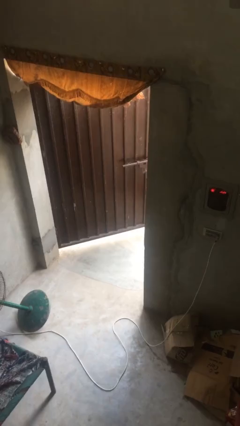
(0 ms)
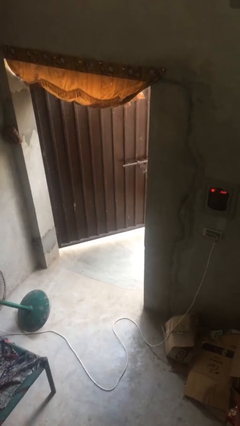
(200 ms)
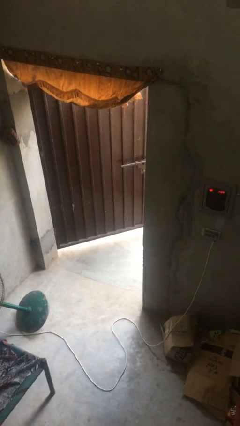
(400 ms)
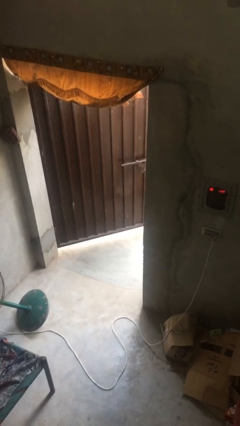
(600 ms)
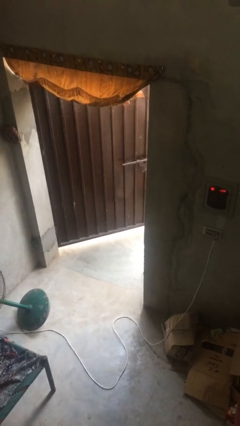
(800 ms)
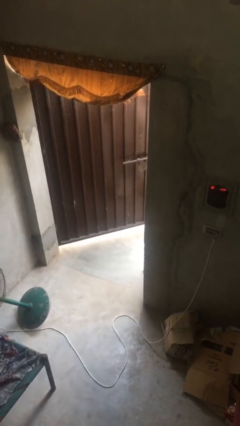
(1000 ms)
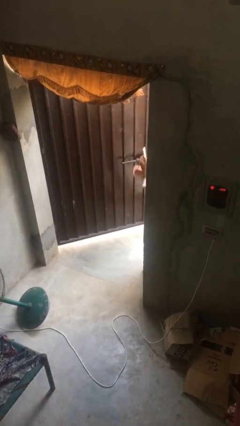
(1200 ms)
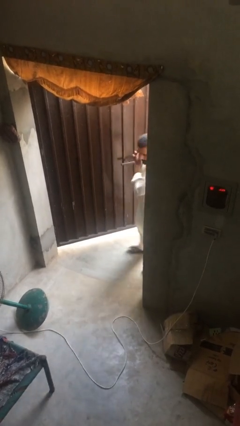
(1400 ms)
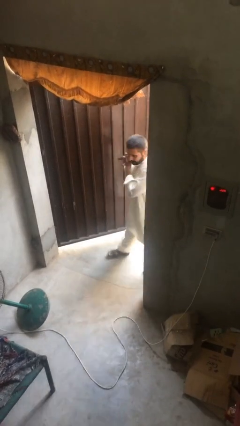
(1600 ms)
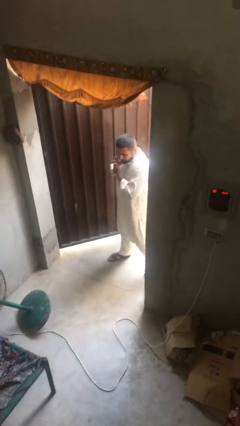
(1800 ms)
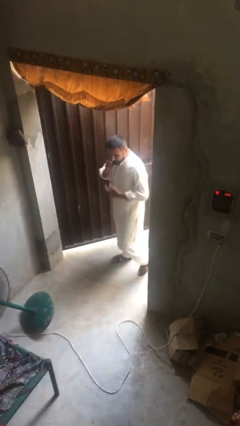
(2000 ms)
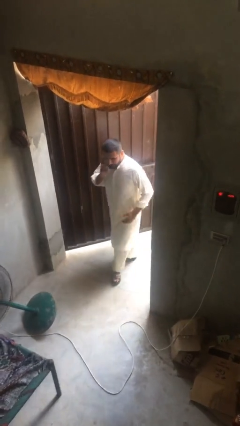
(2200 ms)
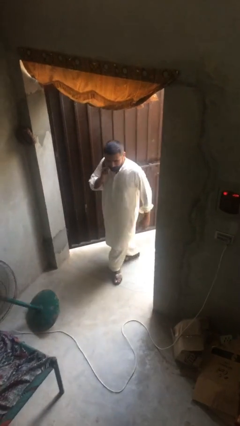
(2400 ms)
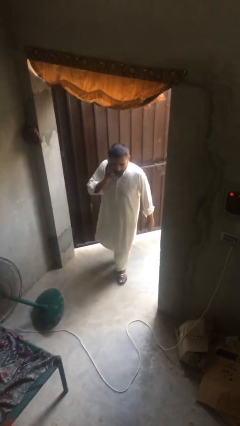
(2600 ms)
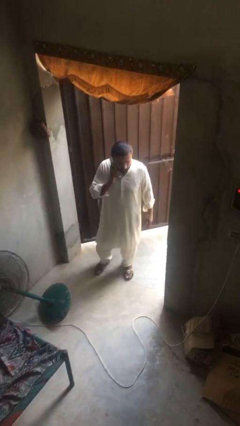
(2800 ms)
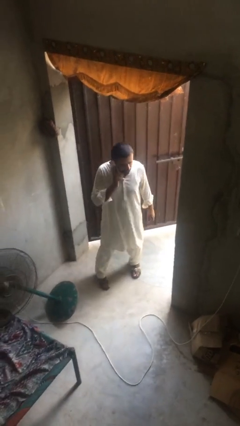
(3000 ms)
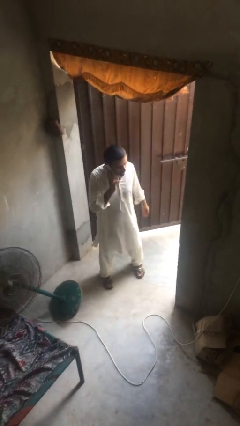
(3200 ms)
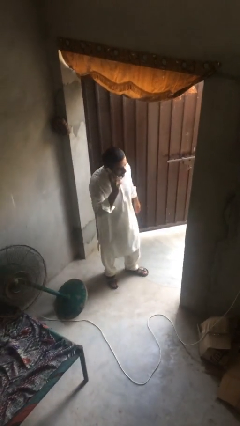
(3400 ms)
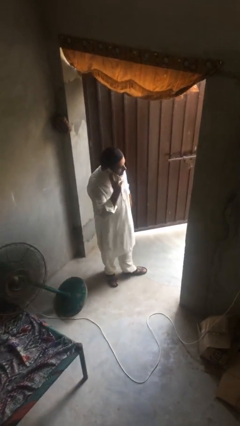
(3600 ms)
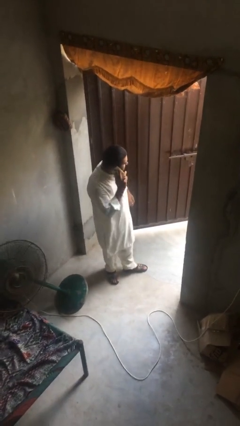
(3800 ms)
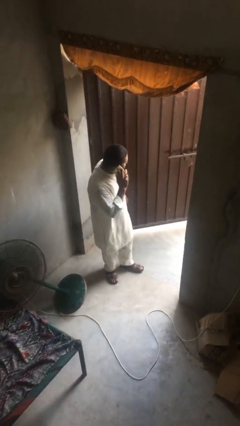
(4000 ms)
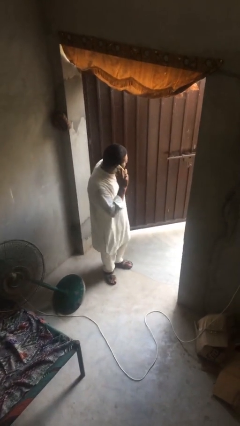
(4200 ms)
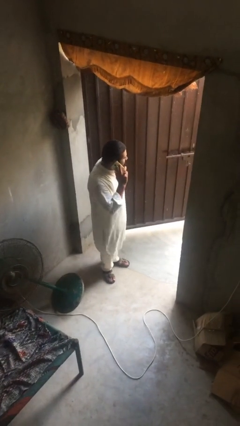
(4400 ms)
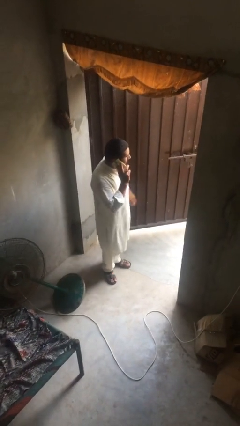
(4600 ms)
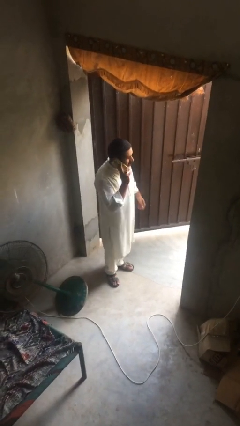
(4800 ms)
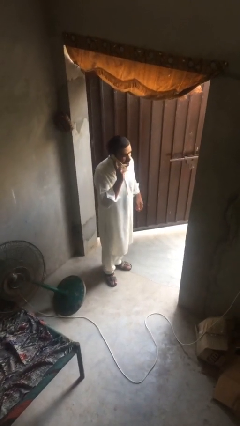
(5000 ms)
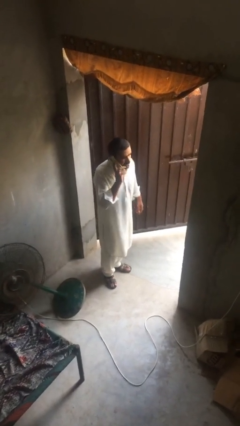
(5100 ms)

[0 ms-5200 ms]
person enters scene through structure

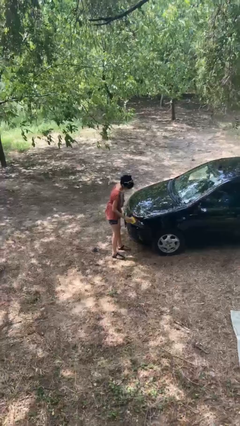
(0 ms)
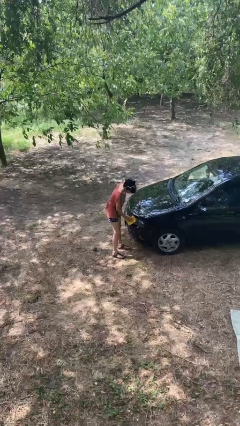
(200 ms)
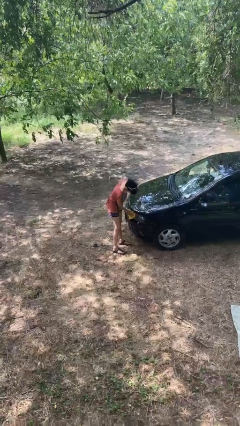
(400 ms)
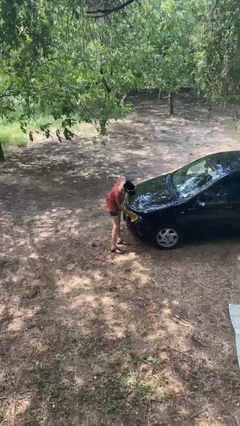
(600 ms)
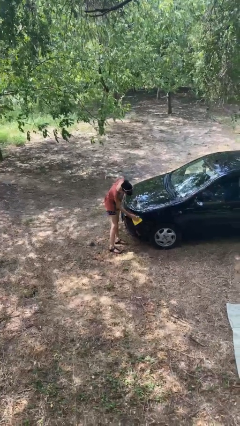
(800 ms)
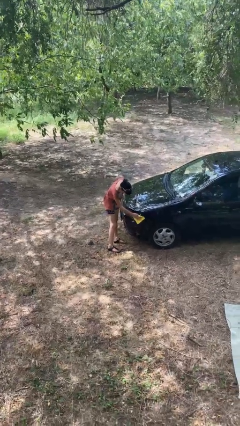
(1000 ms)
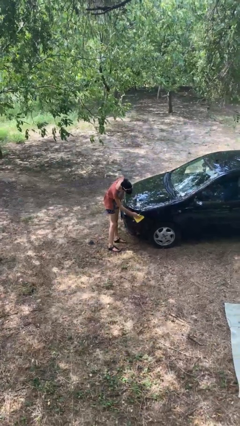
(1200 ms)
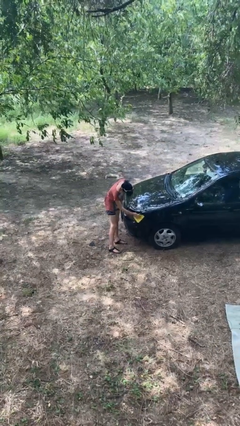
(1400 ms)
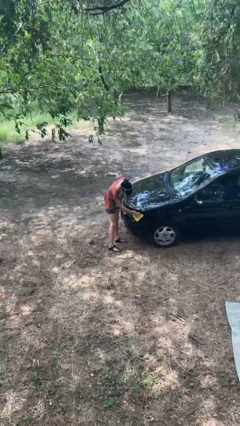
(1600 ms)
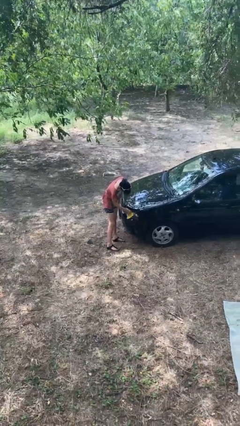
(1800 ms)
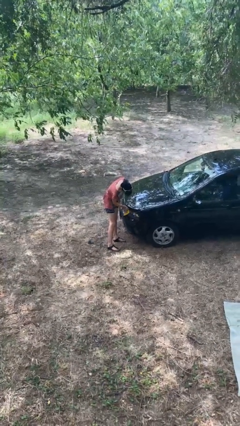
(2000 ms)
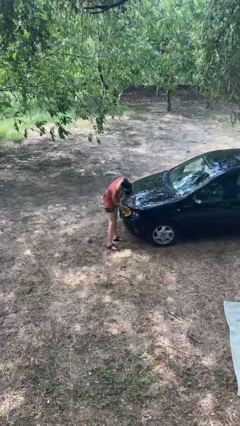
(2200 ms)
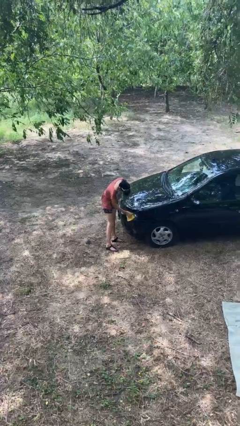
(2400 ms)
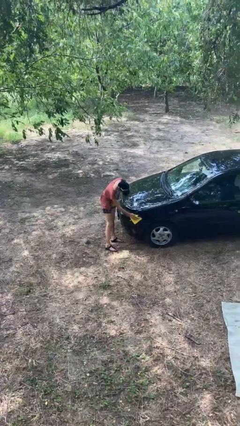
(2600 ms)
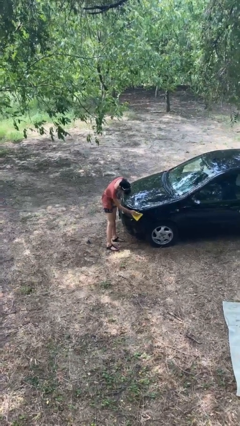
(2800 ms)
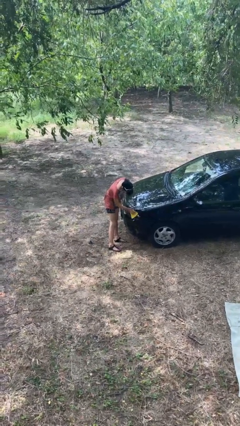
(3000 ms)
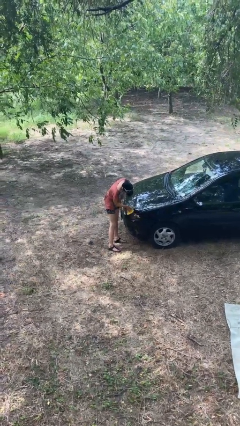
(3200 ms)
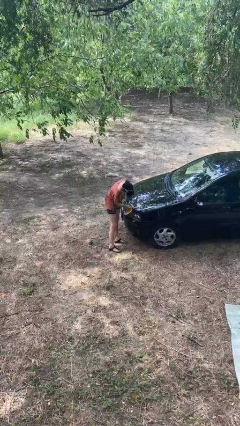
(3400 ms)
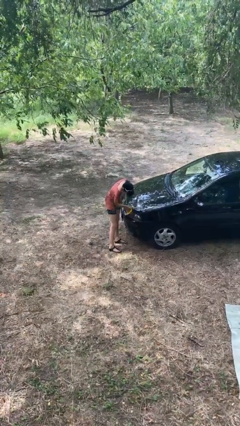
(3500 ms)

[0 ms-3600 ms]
person polishes car with rag

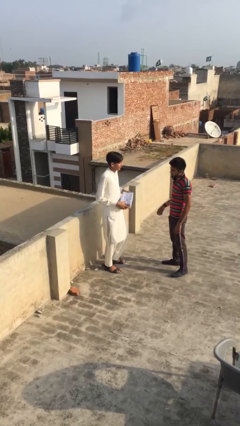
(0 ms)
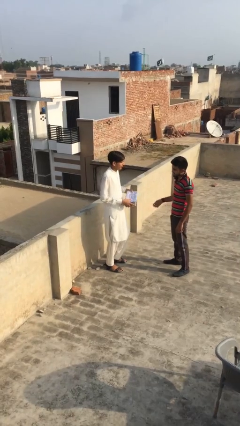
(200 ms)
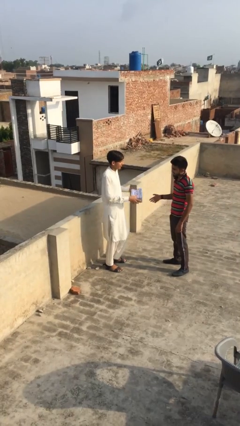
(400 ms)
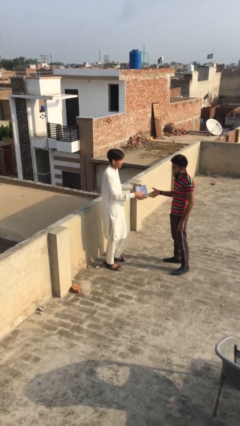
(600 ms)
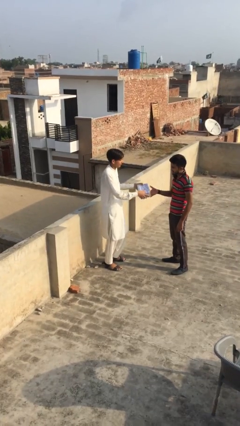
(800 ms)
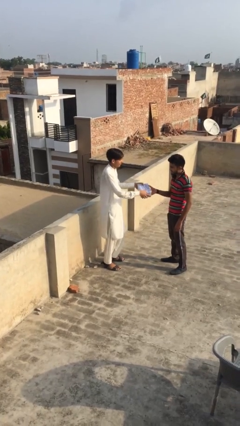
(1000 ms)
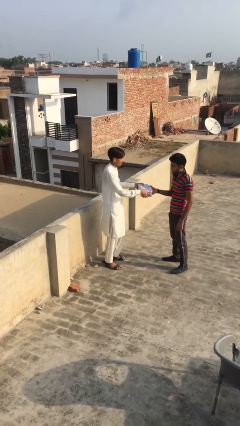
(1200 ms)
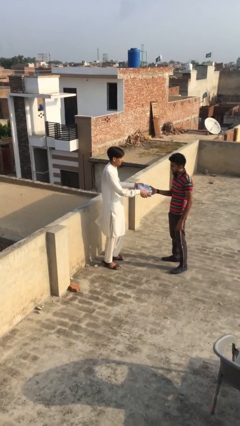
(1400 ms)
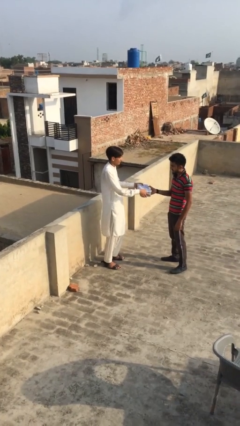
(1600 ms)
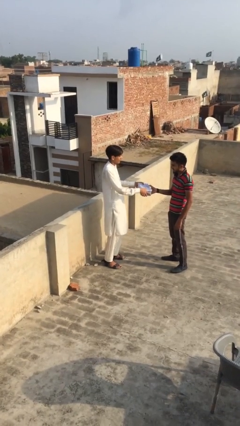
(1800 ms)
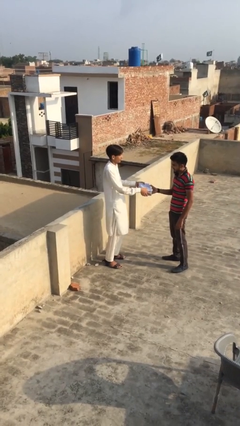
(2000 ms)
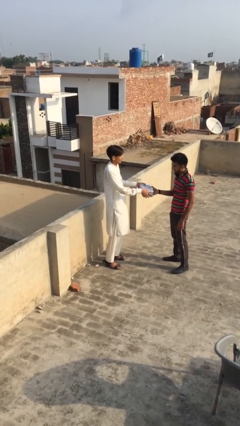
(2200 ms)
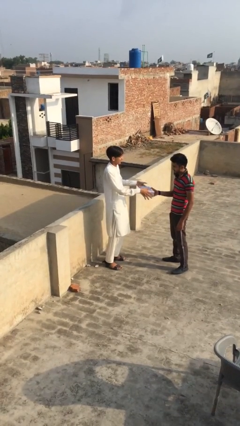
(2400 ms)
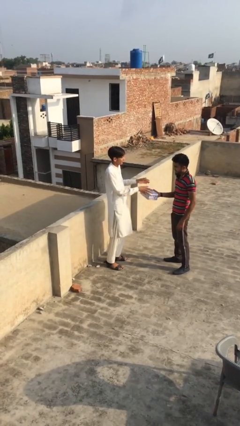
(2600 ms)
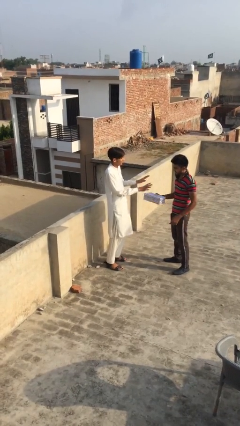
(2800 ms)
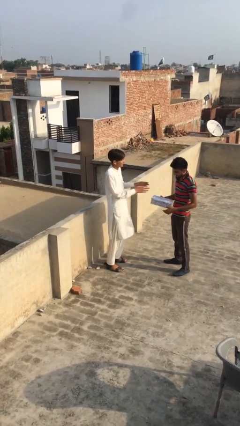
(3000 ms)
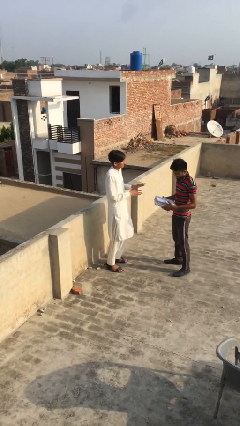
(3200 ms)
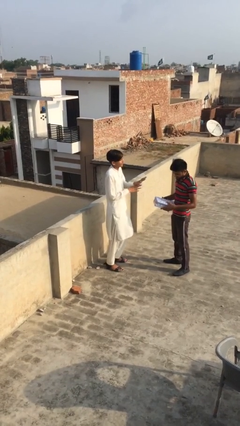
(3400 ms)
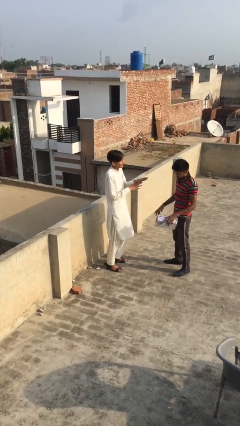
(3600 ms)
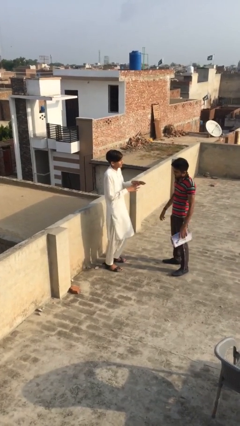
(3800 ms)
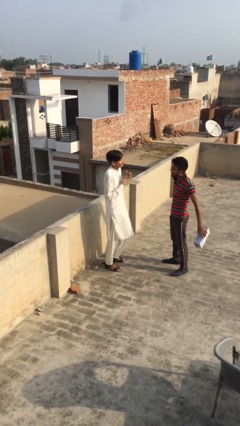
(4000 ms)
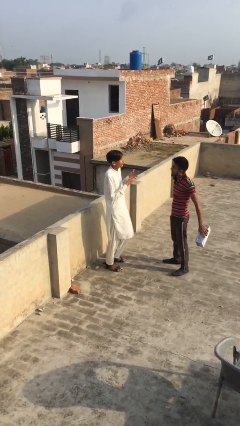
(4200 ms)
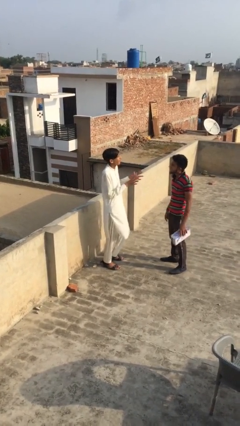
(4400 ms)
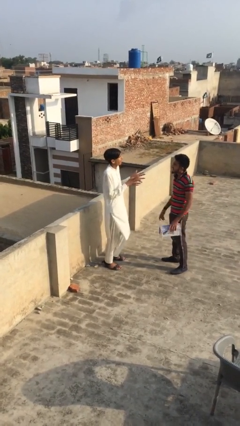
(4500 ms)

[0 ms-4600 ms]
person transfers object to person

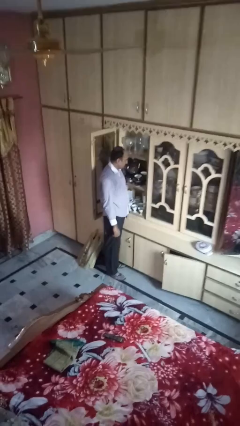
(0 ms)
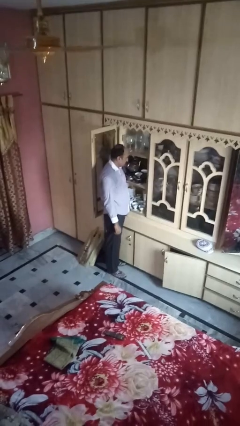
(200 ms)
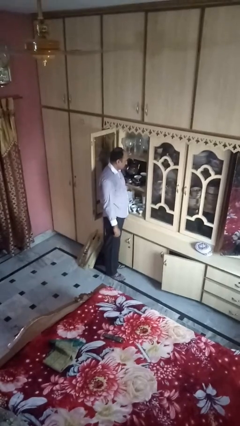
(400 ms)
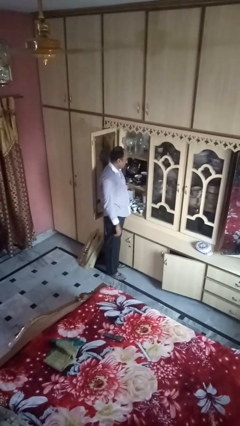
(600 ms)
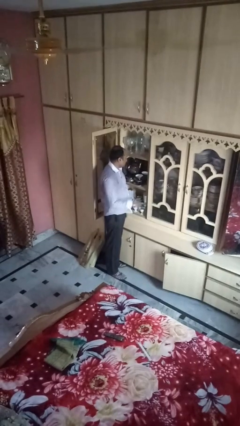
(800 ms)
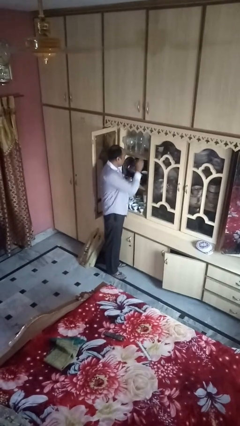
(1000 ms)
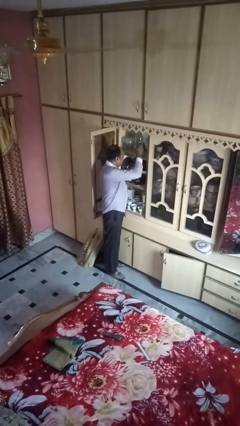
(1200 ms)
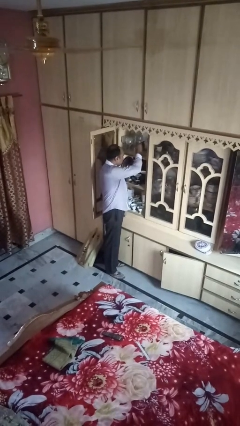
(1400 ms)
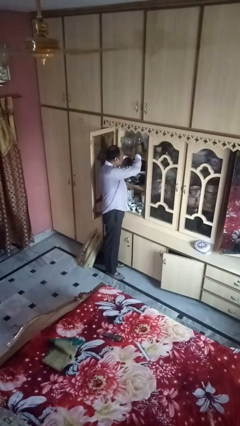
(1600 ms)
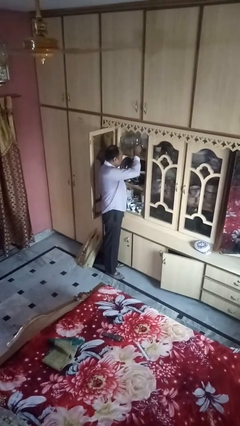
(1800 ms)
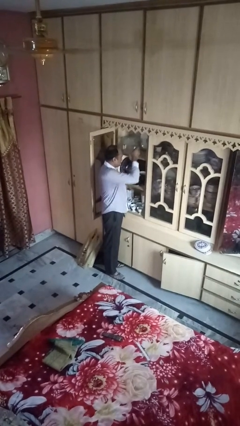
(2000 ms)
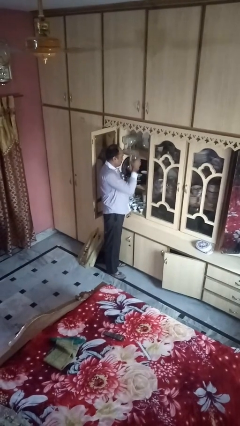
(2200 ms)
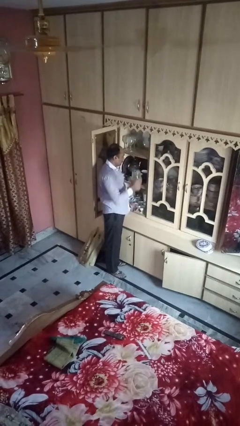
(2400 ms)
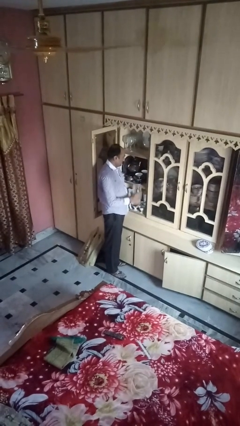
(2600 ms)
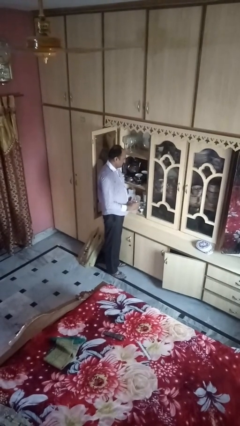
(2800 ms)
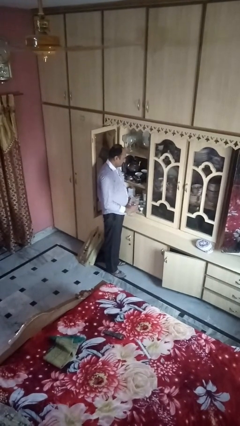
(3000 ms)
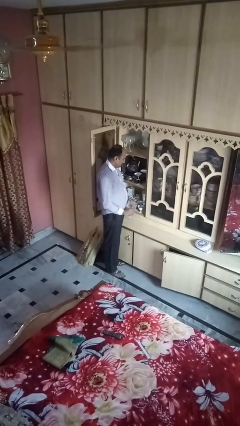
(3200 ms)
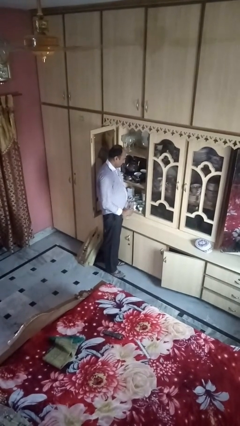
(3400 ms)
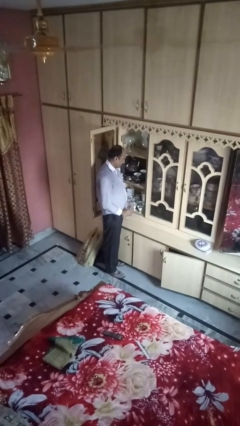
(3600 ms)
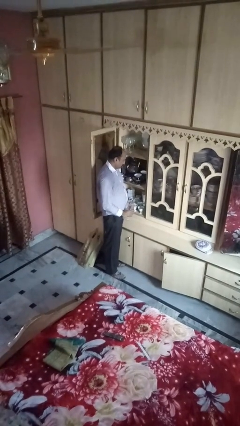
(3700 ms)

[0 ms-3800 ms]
person picks up object from cabinet

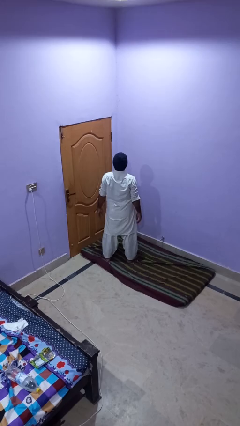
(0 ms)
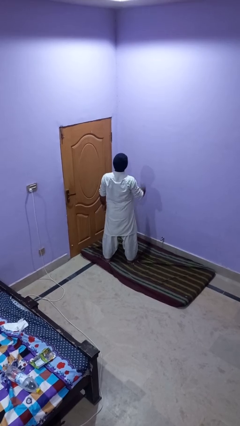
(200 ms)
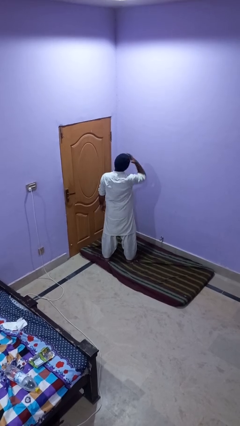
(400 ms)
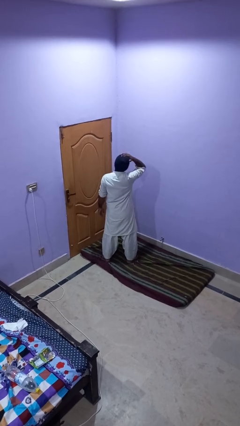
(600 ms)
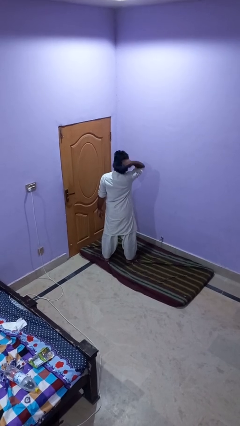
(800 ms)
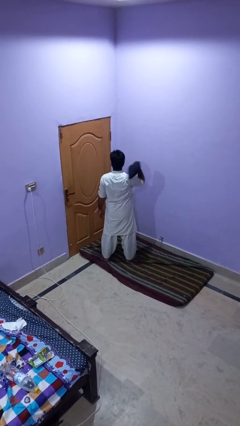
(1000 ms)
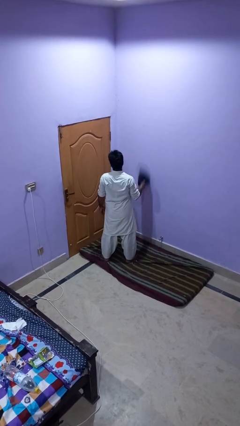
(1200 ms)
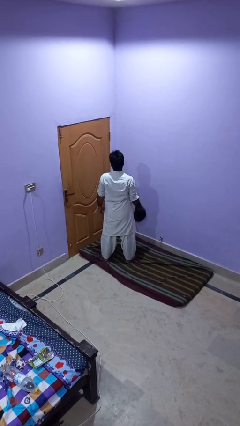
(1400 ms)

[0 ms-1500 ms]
person takes off hat
